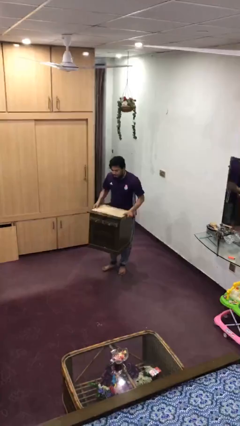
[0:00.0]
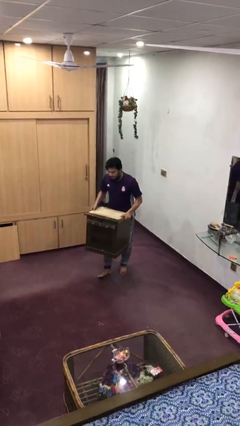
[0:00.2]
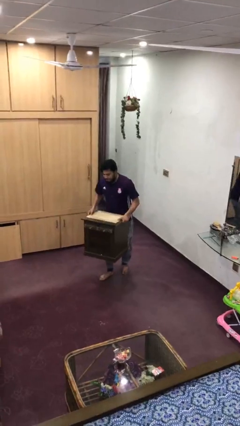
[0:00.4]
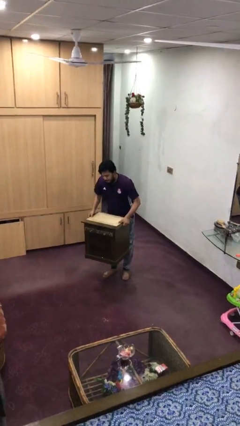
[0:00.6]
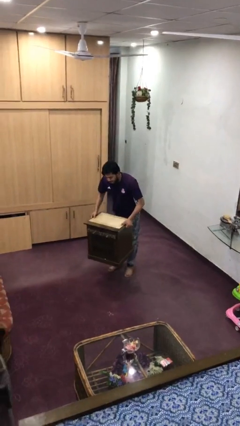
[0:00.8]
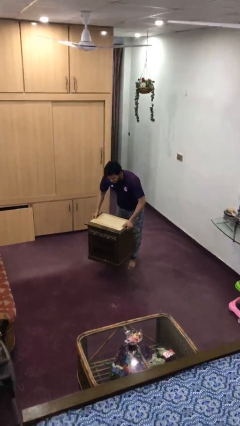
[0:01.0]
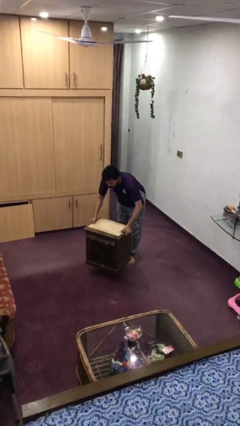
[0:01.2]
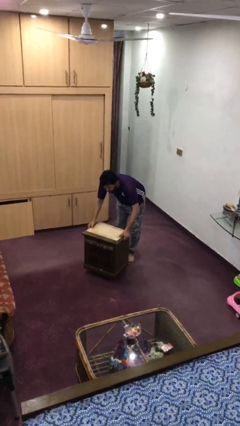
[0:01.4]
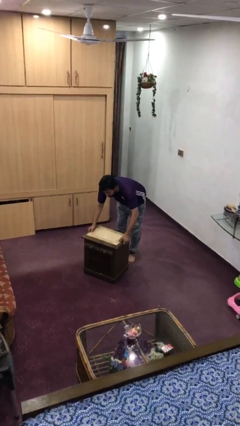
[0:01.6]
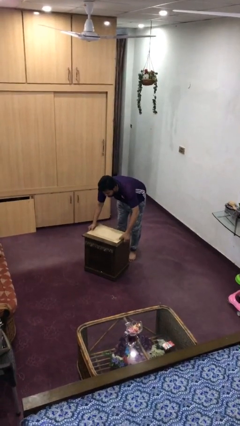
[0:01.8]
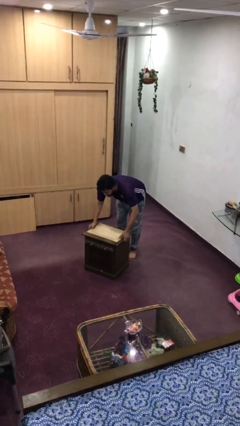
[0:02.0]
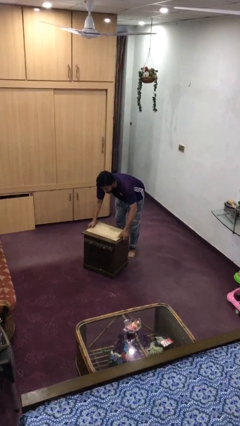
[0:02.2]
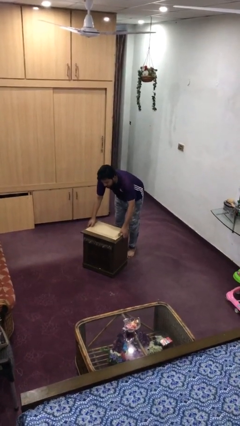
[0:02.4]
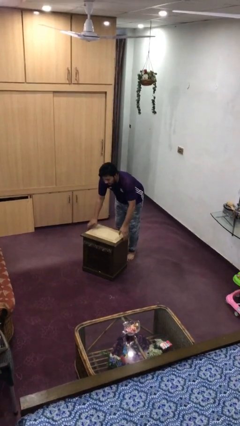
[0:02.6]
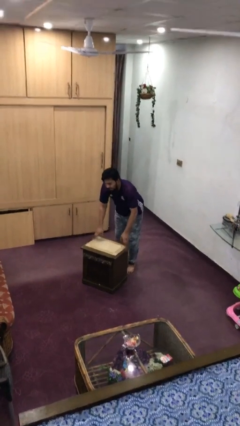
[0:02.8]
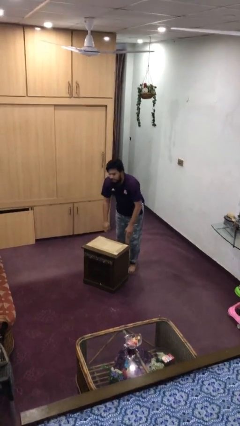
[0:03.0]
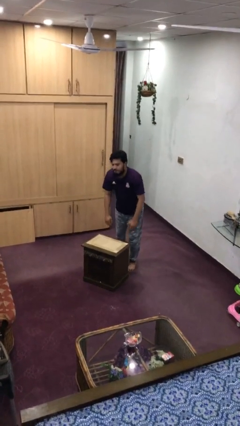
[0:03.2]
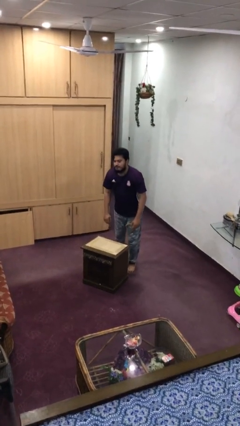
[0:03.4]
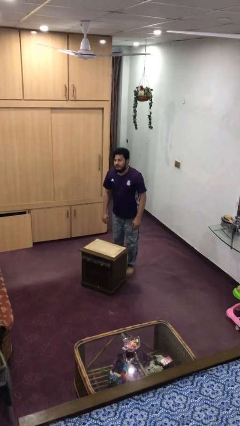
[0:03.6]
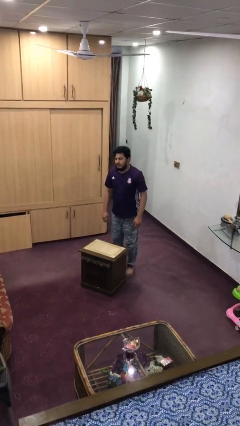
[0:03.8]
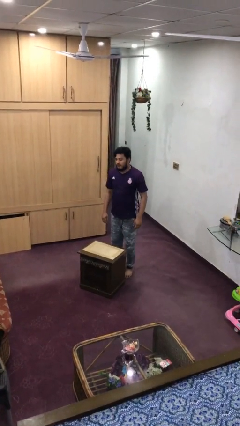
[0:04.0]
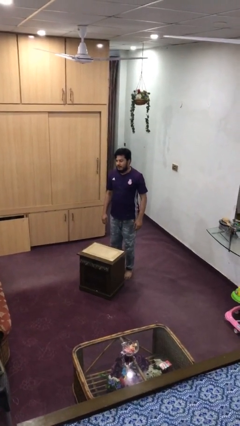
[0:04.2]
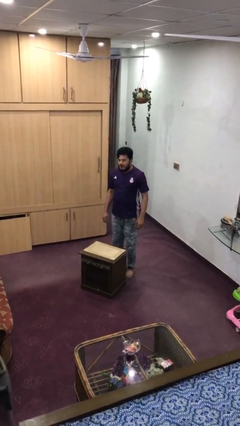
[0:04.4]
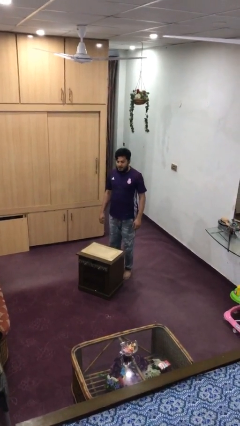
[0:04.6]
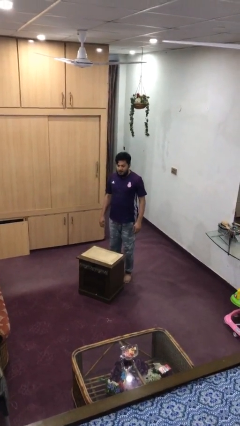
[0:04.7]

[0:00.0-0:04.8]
person puts down object on floor

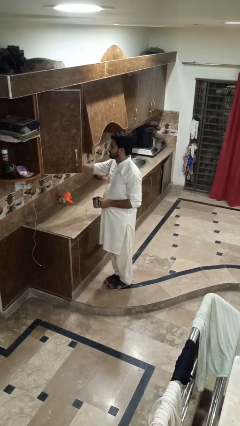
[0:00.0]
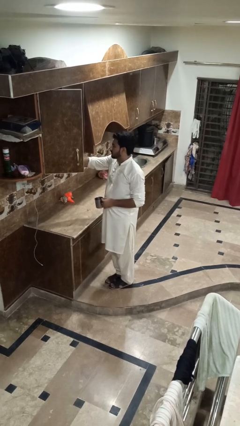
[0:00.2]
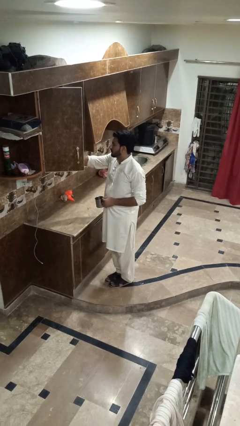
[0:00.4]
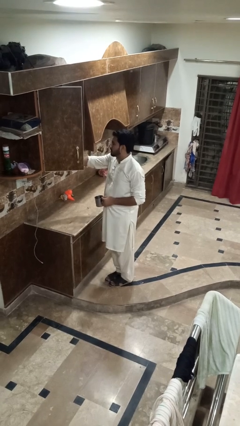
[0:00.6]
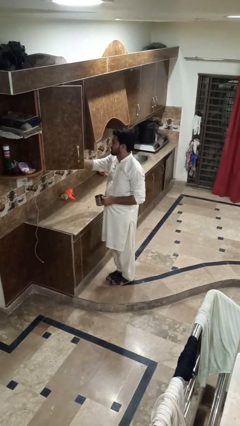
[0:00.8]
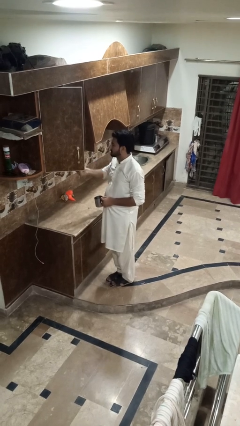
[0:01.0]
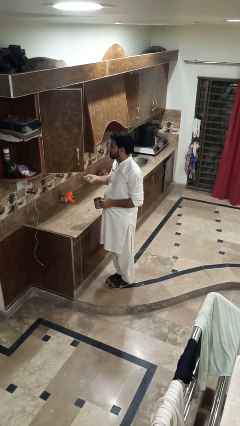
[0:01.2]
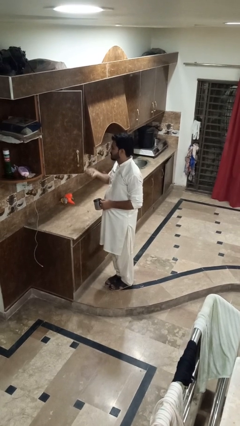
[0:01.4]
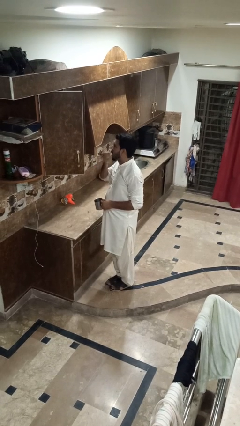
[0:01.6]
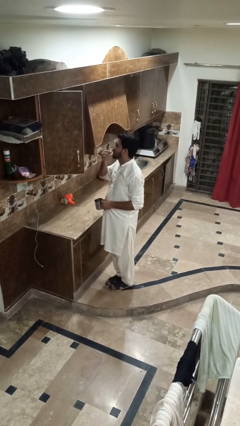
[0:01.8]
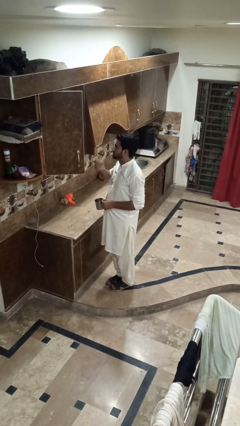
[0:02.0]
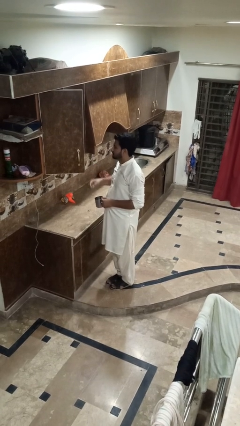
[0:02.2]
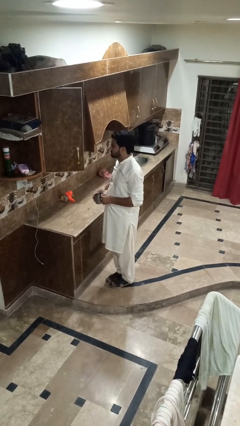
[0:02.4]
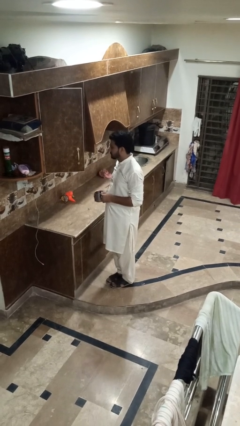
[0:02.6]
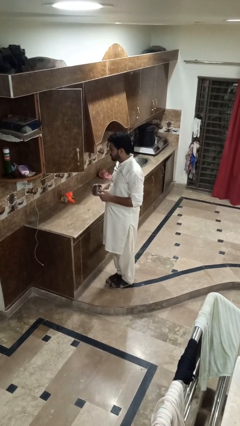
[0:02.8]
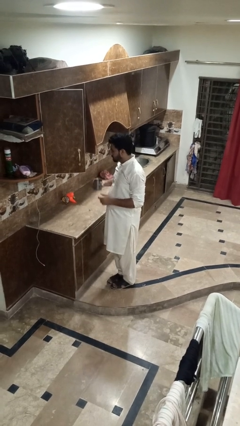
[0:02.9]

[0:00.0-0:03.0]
person takes medicine pills

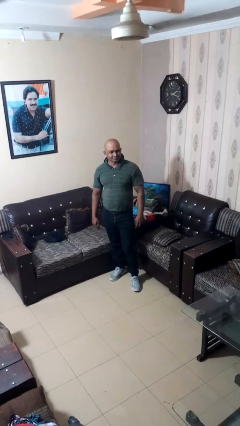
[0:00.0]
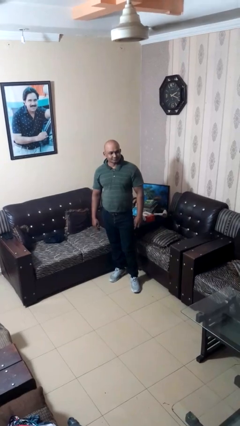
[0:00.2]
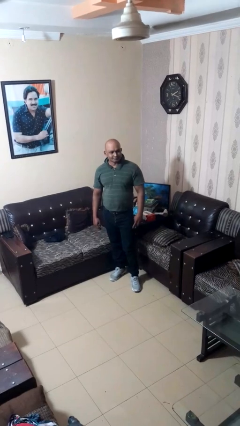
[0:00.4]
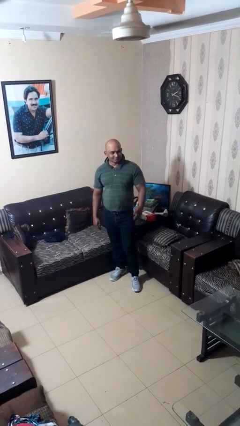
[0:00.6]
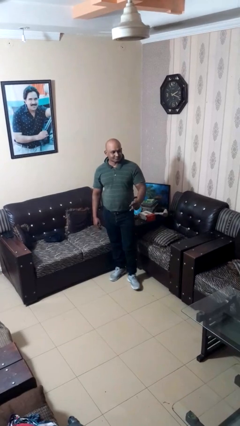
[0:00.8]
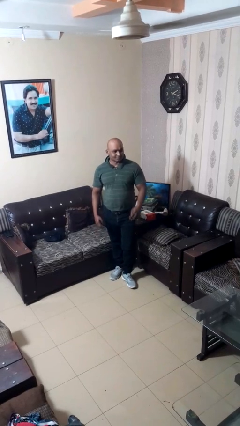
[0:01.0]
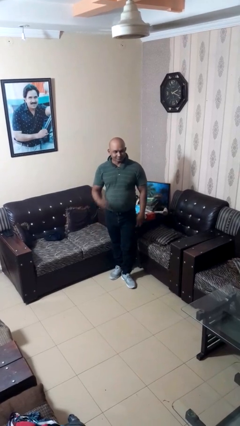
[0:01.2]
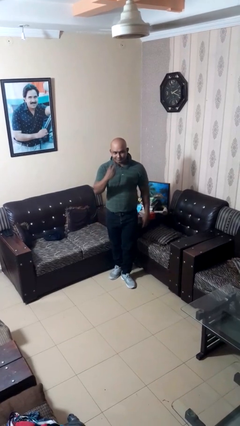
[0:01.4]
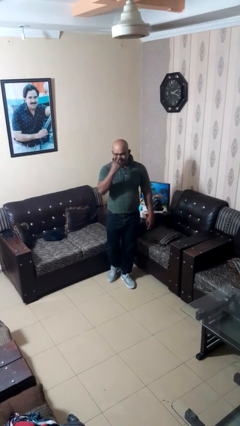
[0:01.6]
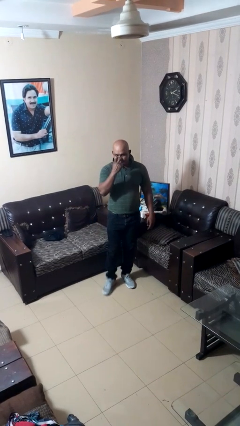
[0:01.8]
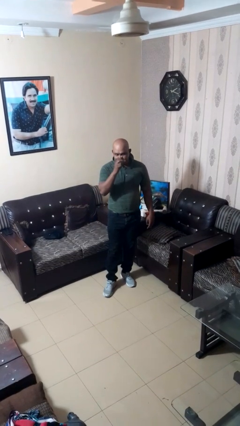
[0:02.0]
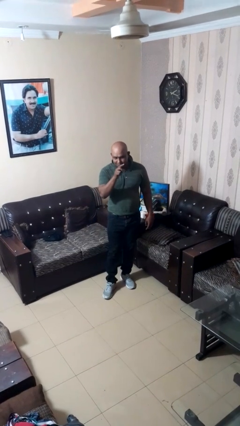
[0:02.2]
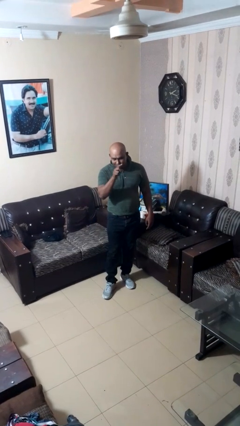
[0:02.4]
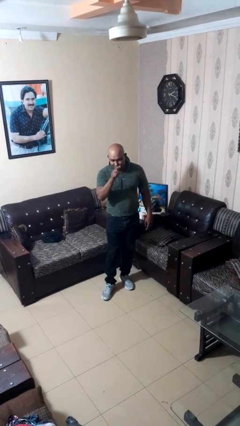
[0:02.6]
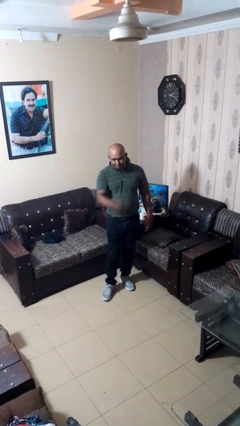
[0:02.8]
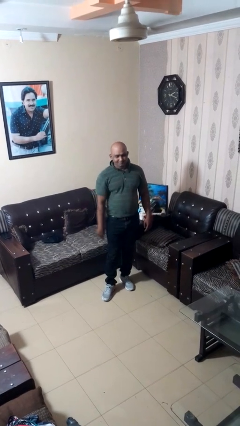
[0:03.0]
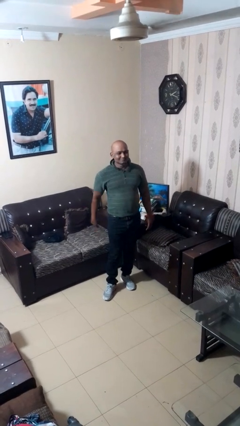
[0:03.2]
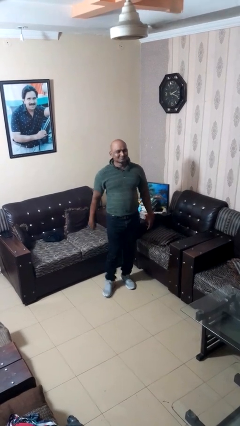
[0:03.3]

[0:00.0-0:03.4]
person gestures watch closely

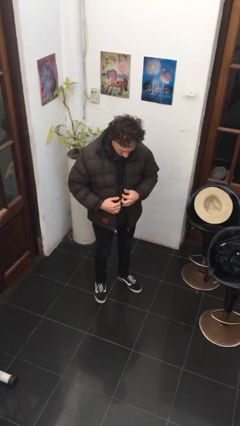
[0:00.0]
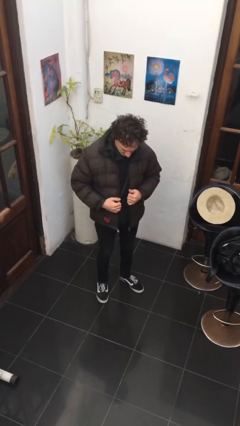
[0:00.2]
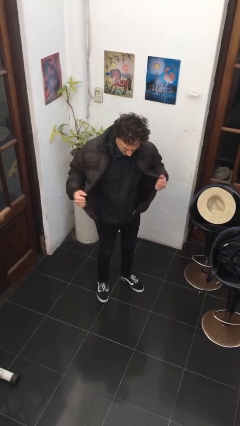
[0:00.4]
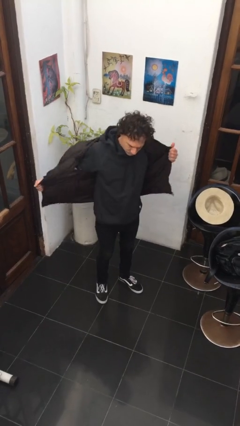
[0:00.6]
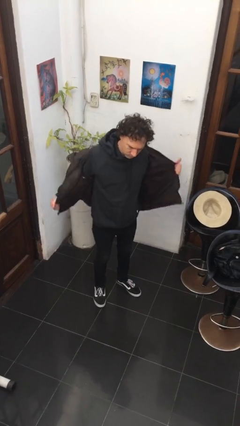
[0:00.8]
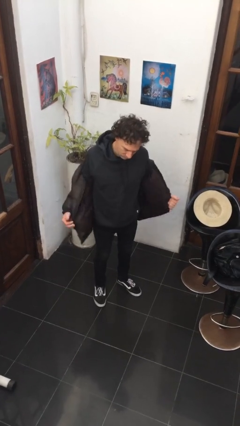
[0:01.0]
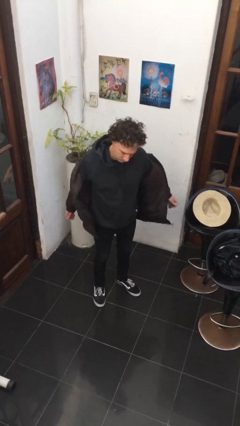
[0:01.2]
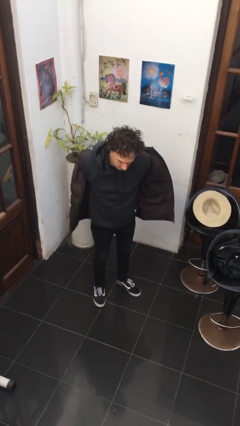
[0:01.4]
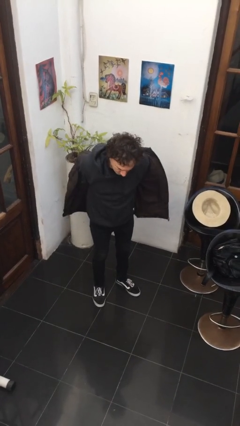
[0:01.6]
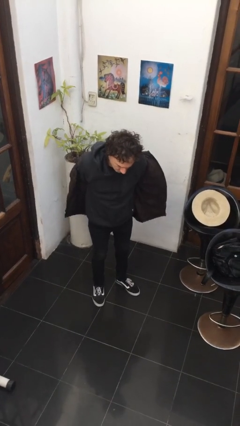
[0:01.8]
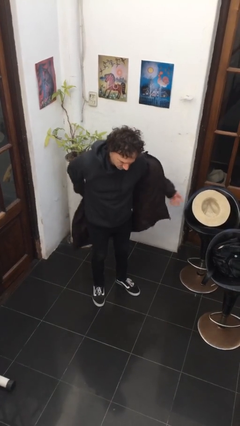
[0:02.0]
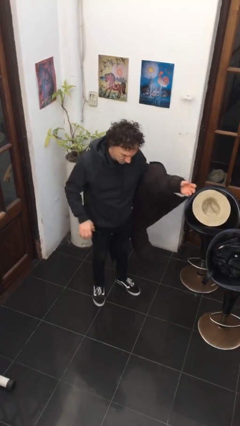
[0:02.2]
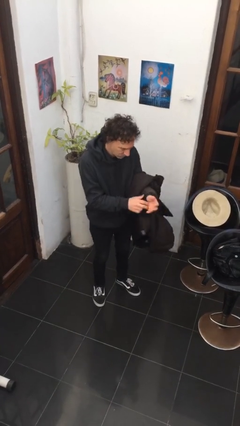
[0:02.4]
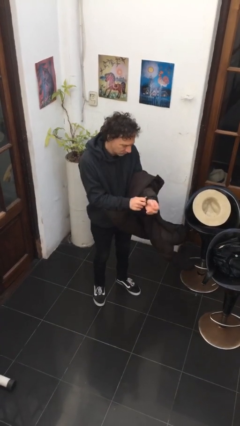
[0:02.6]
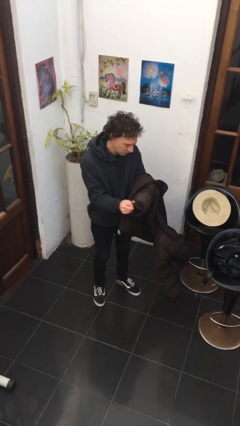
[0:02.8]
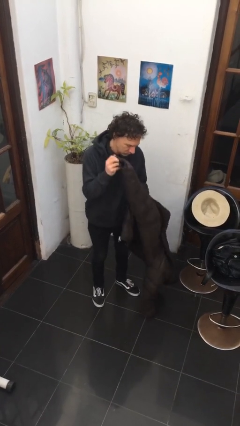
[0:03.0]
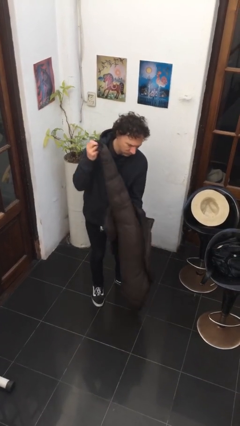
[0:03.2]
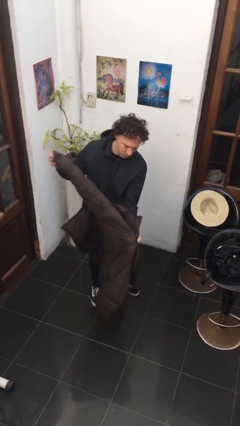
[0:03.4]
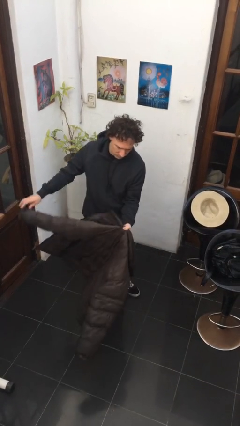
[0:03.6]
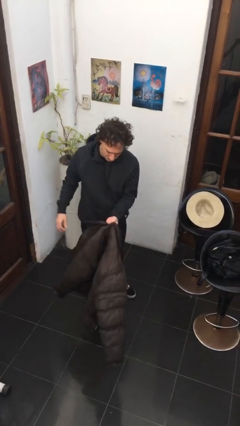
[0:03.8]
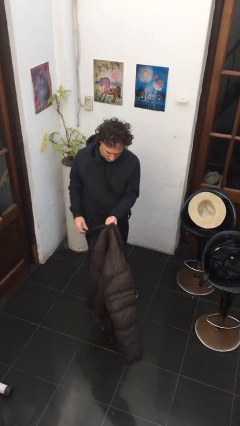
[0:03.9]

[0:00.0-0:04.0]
person takes off jacket

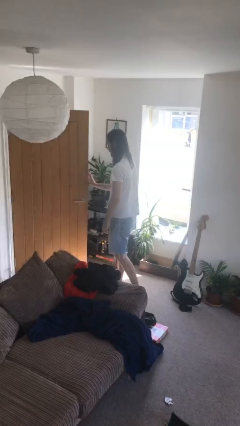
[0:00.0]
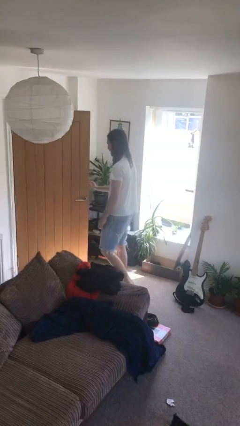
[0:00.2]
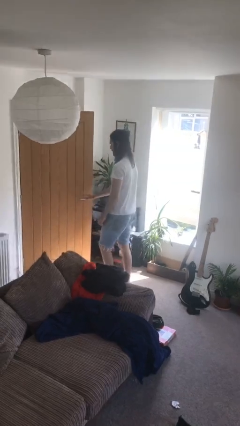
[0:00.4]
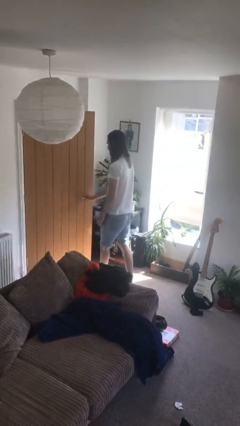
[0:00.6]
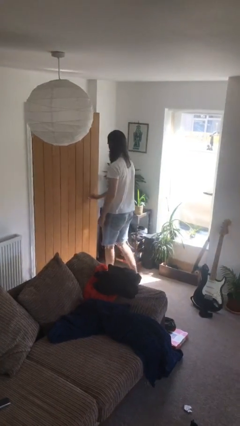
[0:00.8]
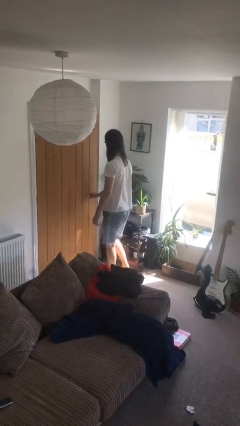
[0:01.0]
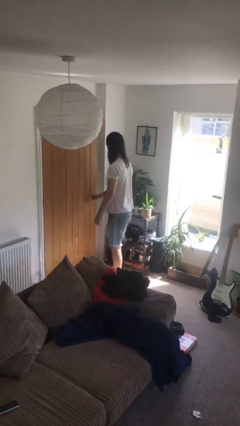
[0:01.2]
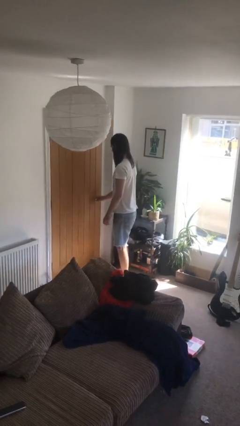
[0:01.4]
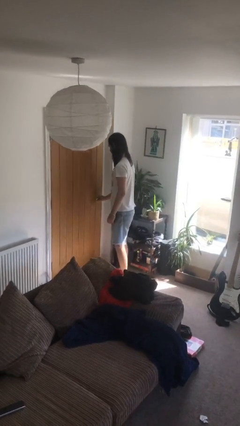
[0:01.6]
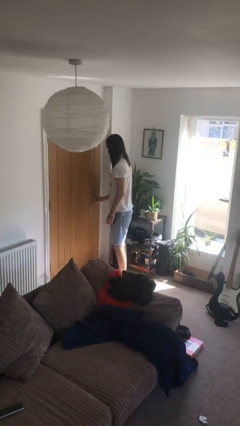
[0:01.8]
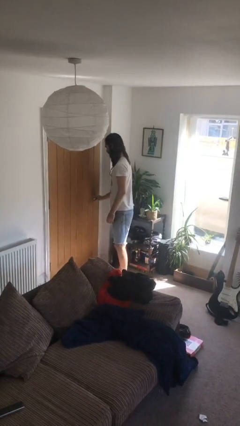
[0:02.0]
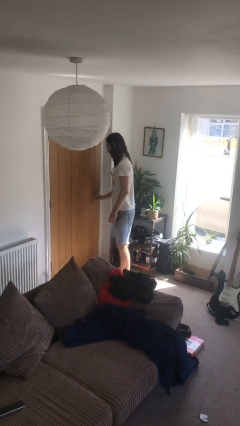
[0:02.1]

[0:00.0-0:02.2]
person closes facility door

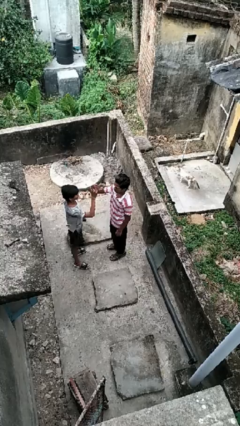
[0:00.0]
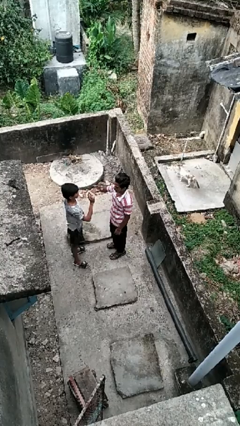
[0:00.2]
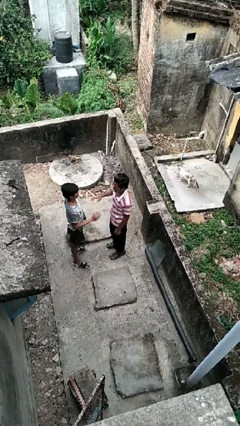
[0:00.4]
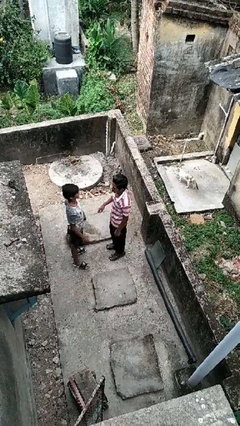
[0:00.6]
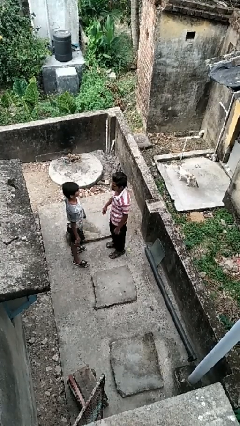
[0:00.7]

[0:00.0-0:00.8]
person highfives hand
